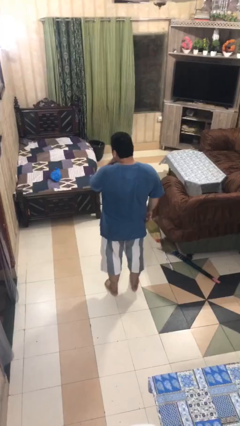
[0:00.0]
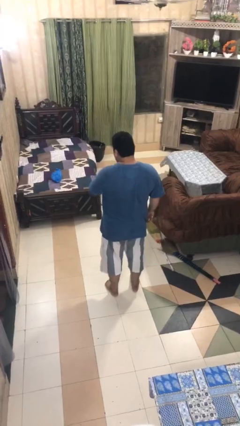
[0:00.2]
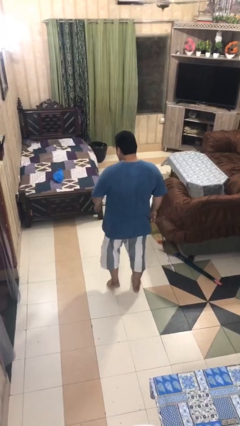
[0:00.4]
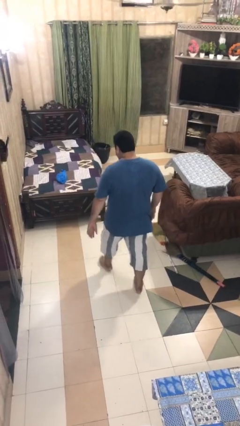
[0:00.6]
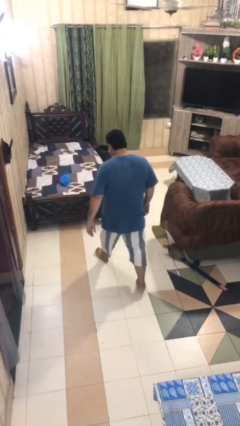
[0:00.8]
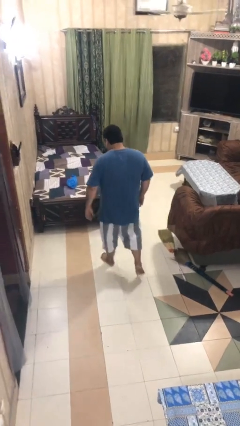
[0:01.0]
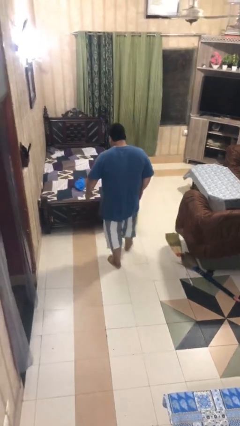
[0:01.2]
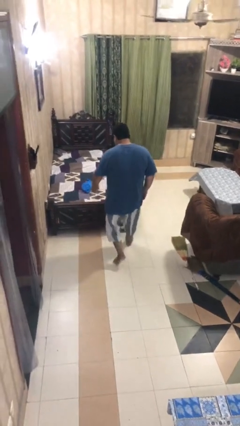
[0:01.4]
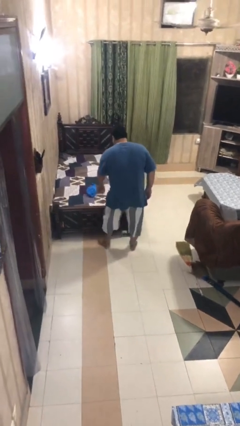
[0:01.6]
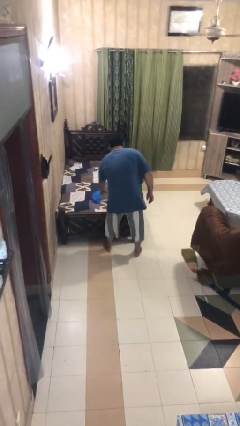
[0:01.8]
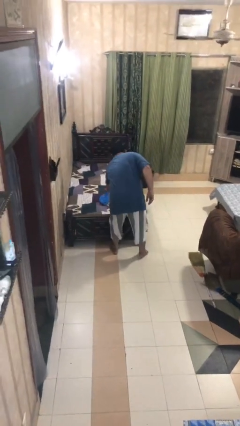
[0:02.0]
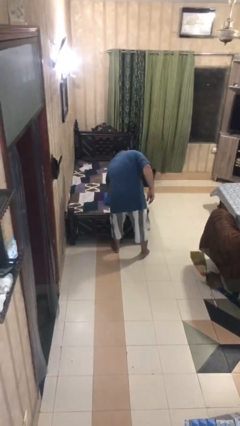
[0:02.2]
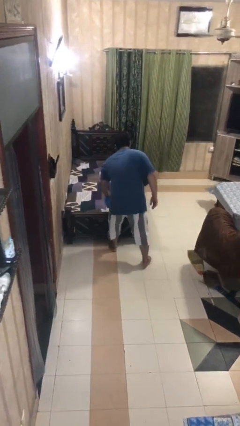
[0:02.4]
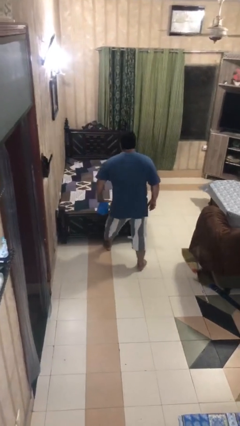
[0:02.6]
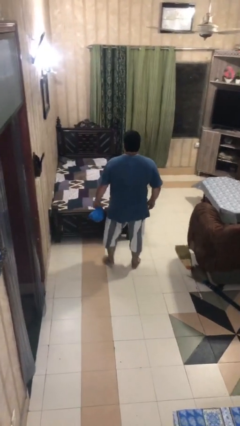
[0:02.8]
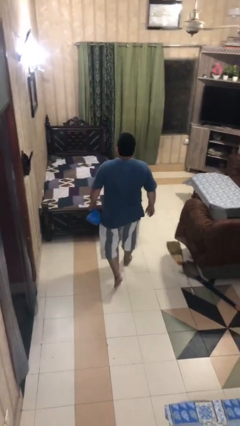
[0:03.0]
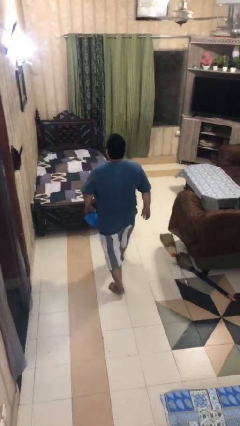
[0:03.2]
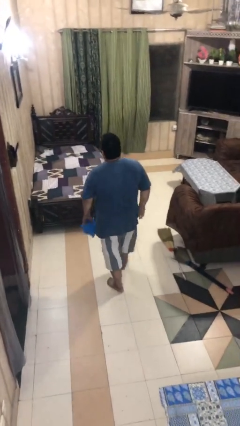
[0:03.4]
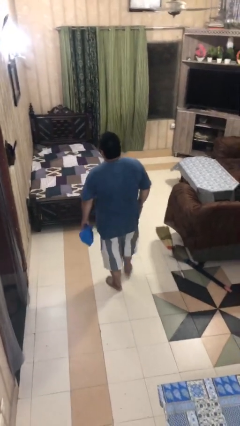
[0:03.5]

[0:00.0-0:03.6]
person picks up object from bed

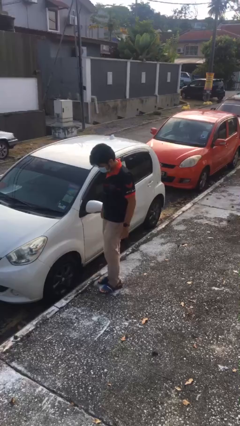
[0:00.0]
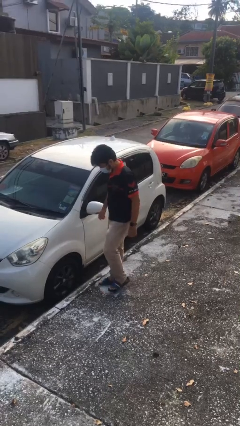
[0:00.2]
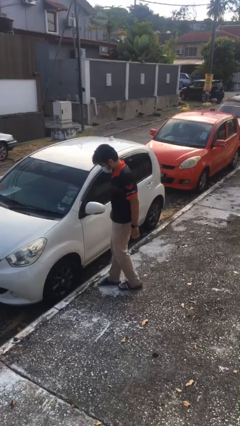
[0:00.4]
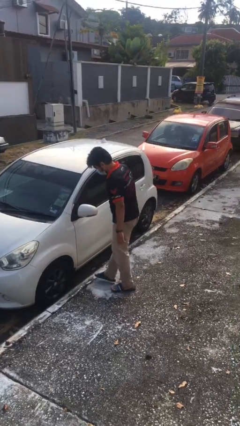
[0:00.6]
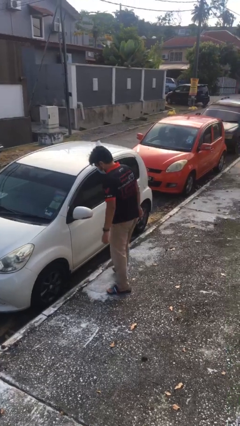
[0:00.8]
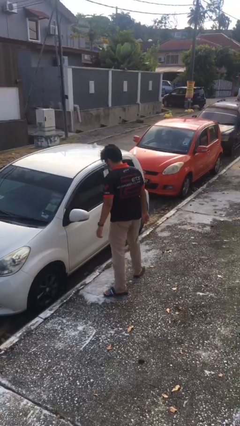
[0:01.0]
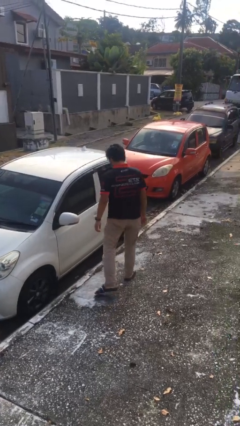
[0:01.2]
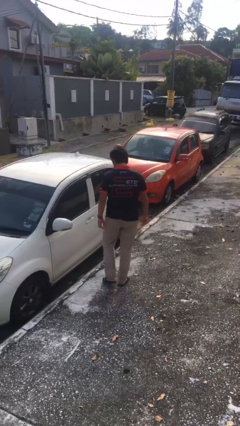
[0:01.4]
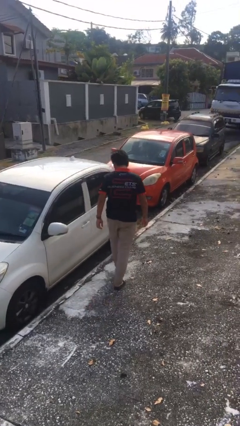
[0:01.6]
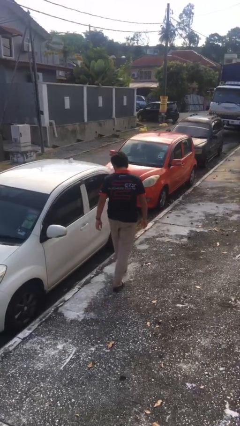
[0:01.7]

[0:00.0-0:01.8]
person kicks car tires

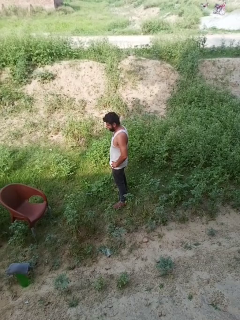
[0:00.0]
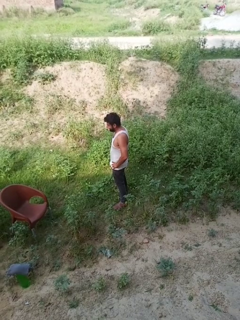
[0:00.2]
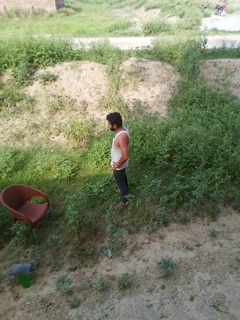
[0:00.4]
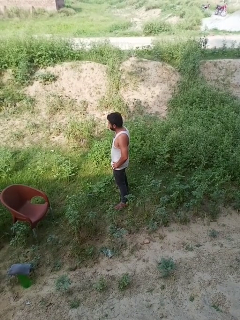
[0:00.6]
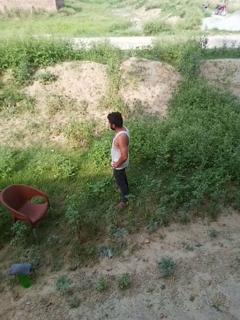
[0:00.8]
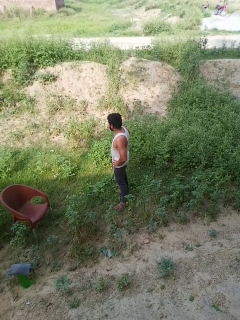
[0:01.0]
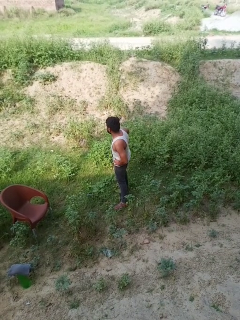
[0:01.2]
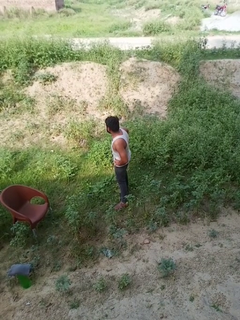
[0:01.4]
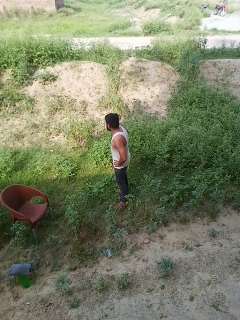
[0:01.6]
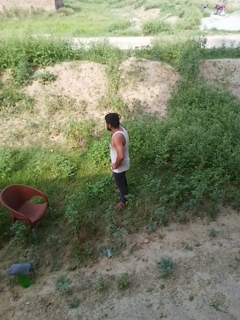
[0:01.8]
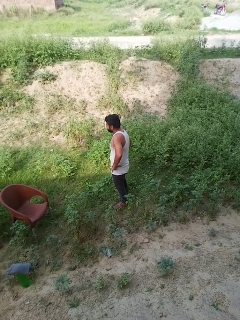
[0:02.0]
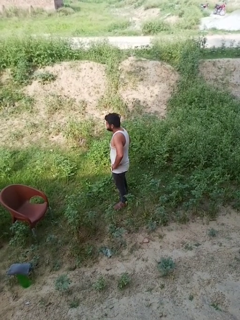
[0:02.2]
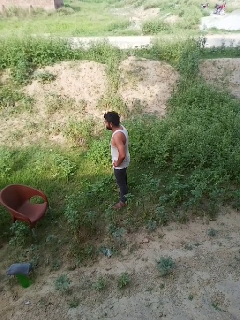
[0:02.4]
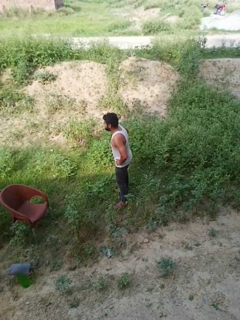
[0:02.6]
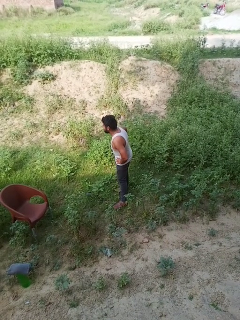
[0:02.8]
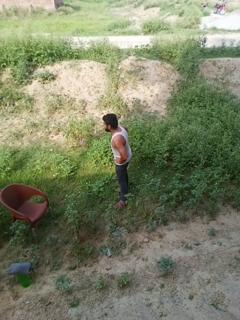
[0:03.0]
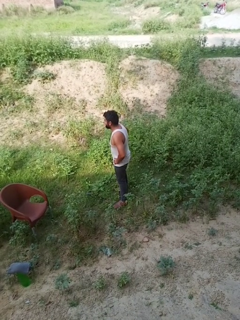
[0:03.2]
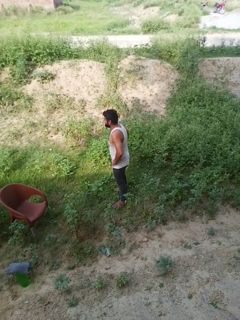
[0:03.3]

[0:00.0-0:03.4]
person wiggles hips

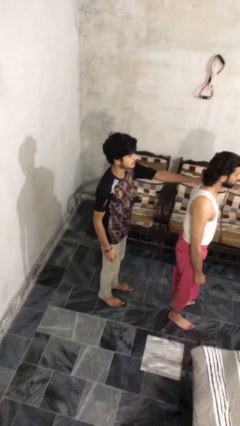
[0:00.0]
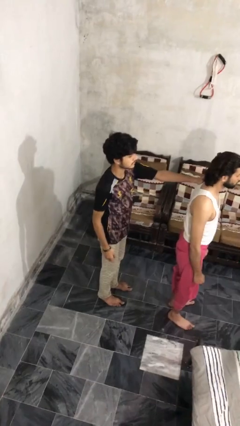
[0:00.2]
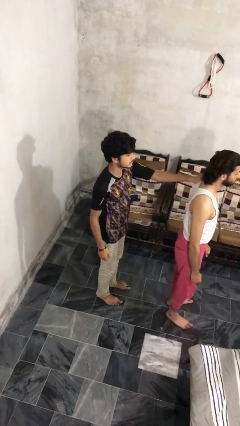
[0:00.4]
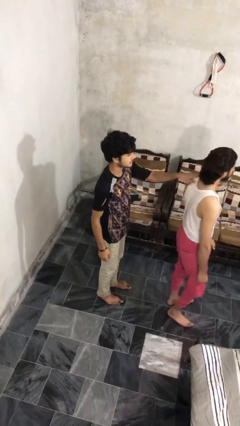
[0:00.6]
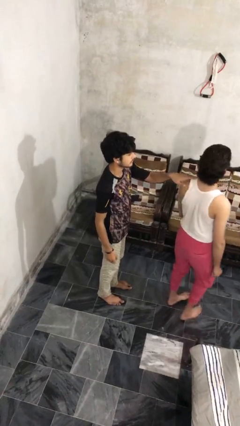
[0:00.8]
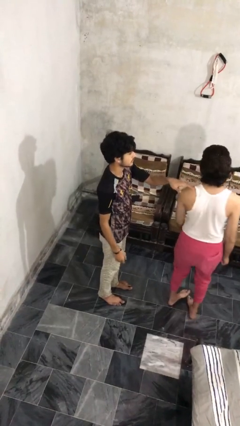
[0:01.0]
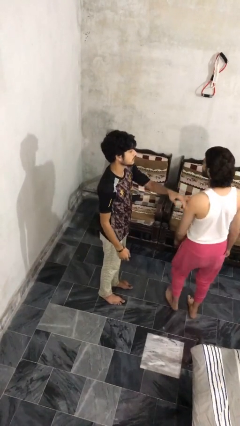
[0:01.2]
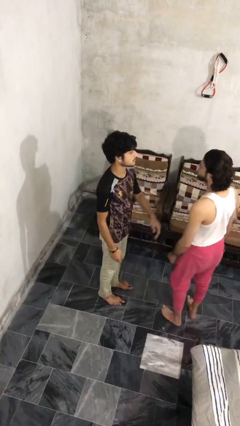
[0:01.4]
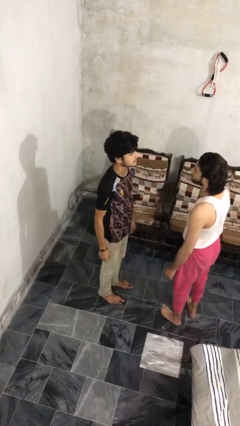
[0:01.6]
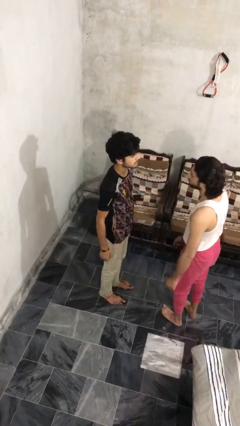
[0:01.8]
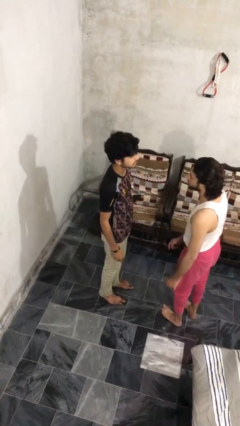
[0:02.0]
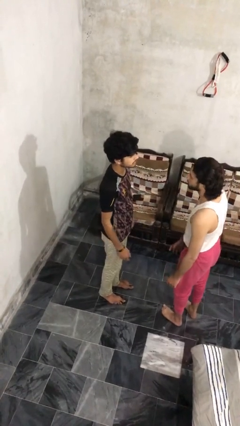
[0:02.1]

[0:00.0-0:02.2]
person spins person around

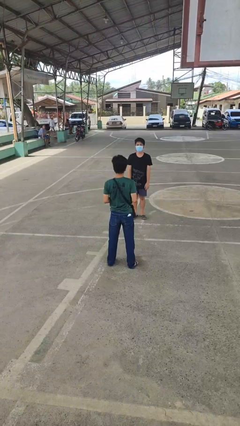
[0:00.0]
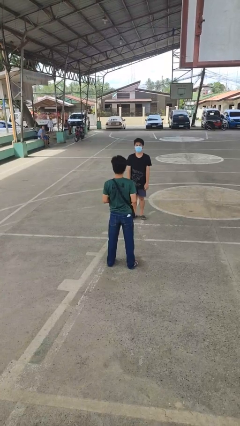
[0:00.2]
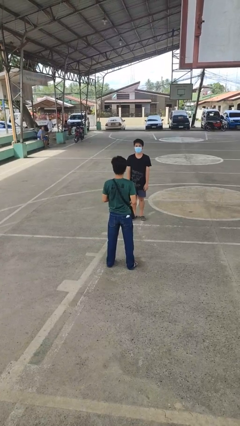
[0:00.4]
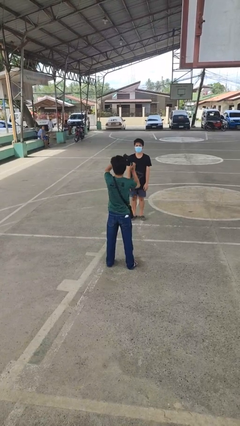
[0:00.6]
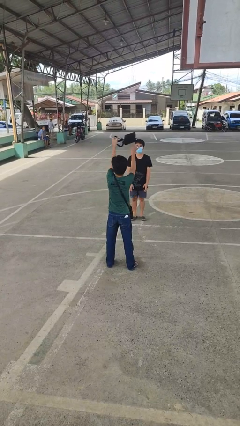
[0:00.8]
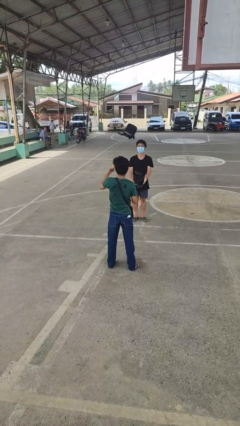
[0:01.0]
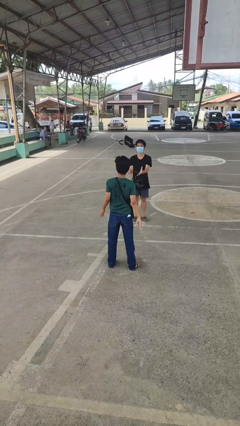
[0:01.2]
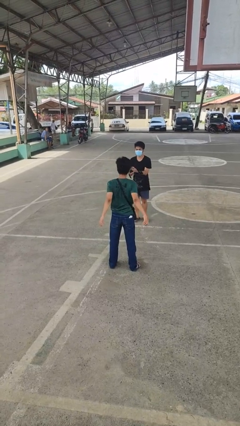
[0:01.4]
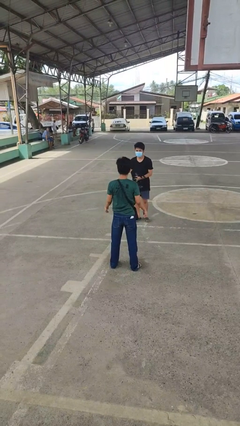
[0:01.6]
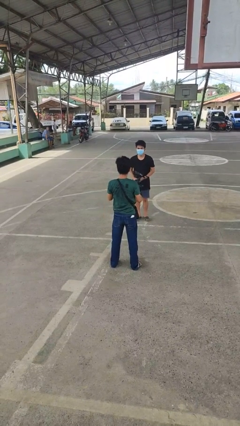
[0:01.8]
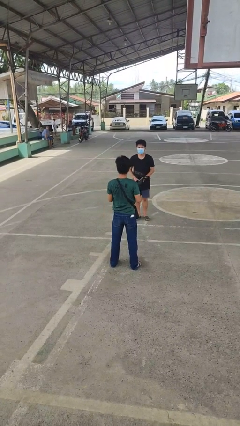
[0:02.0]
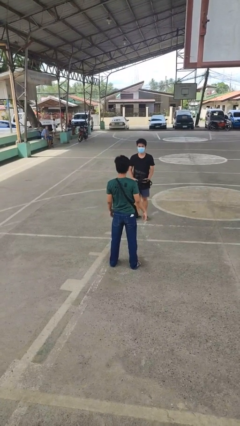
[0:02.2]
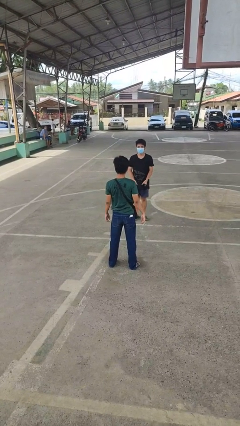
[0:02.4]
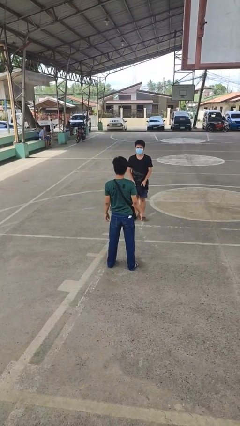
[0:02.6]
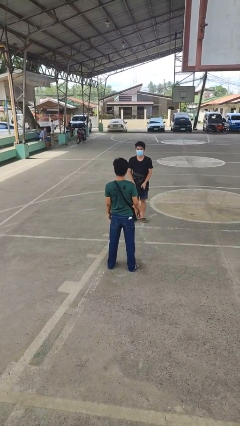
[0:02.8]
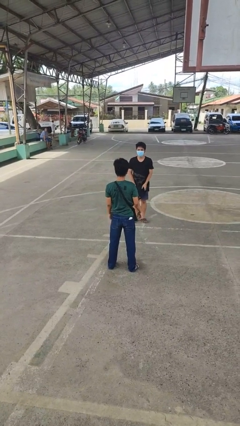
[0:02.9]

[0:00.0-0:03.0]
person throws object to person

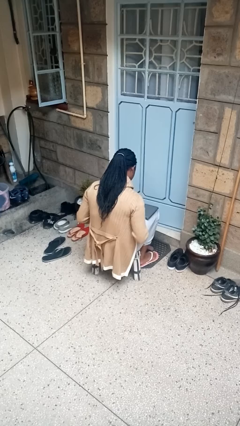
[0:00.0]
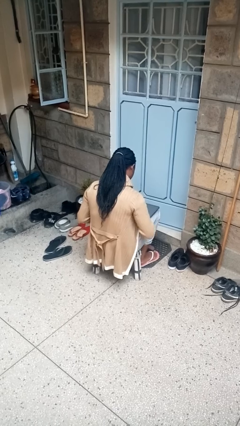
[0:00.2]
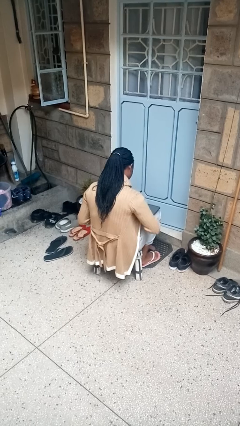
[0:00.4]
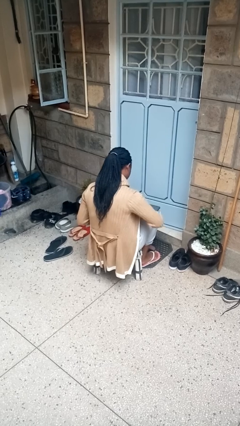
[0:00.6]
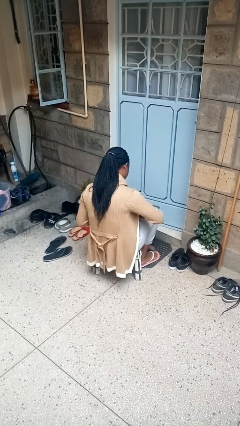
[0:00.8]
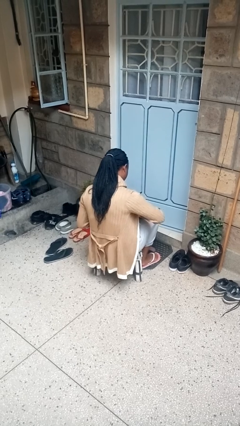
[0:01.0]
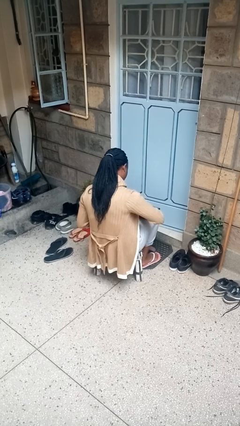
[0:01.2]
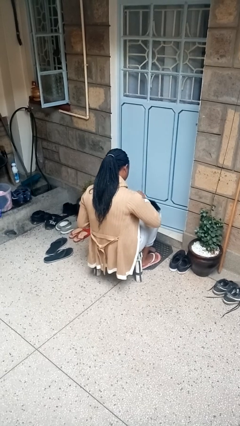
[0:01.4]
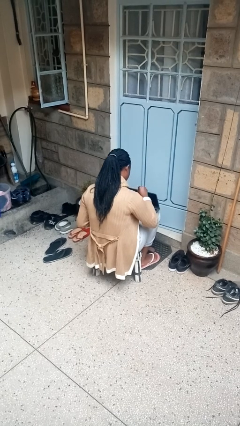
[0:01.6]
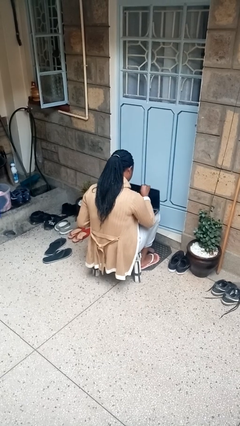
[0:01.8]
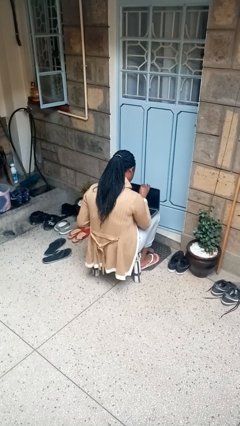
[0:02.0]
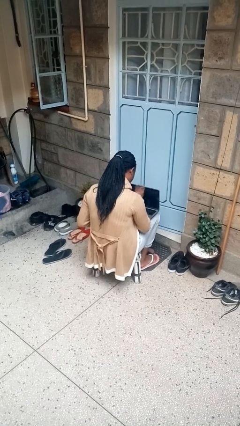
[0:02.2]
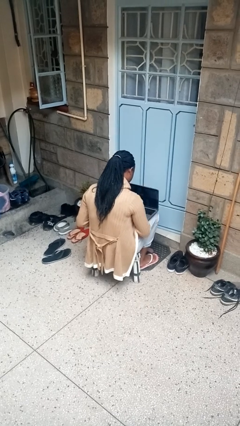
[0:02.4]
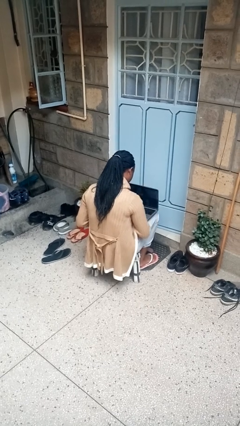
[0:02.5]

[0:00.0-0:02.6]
person opens laptop

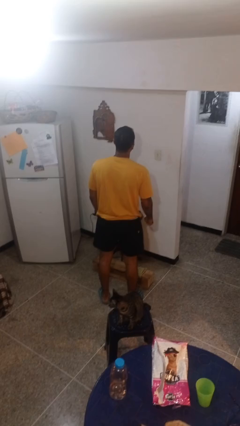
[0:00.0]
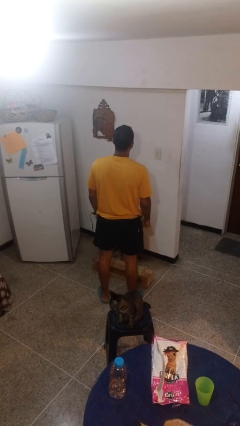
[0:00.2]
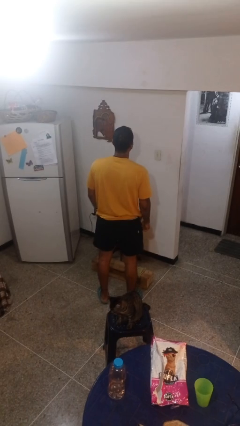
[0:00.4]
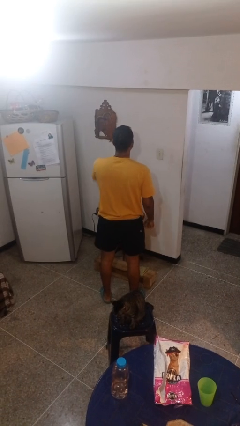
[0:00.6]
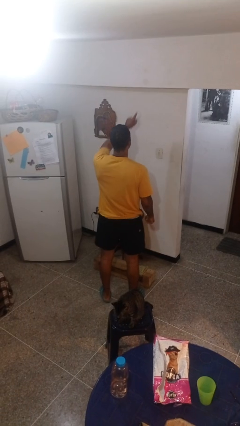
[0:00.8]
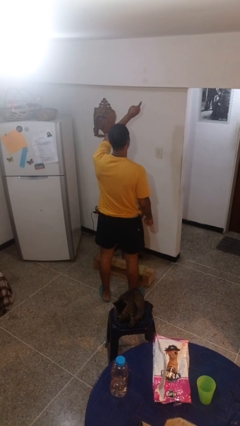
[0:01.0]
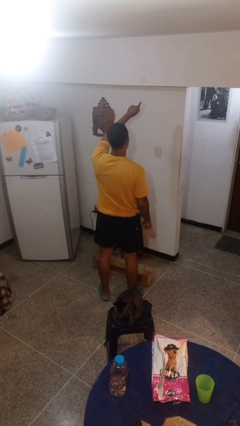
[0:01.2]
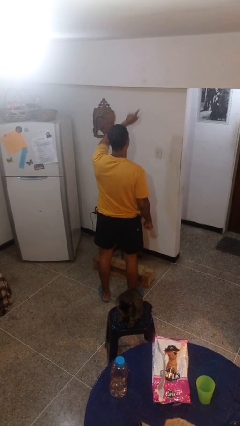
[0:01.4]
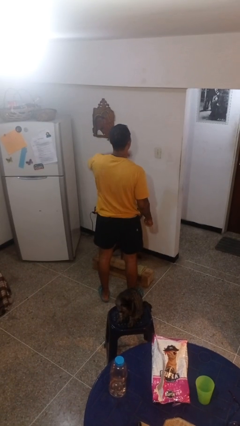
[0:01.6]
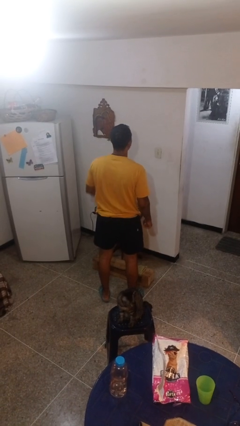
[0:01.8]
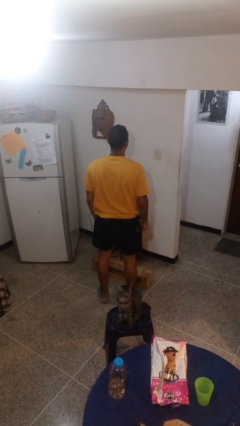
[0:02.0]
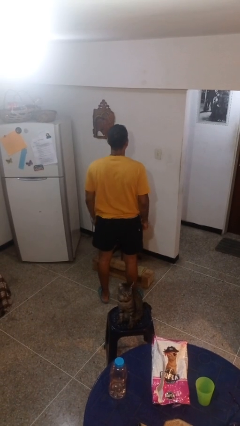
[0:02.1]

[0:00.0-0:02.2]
person gestures number one
